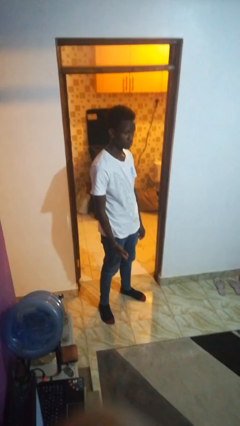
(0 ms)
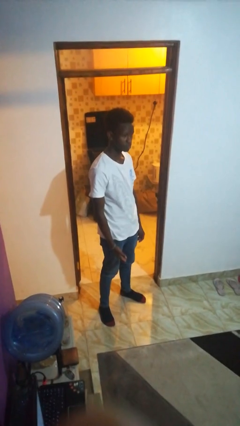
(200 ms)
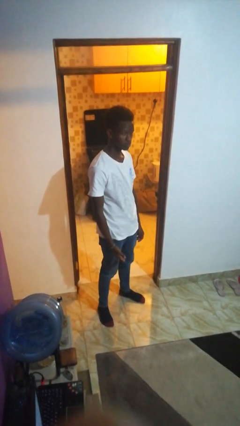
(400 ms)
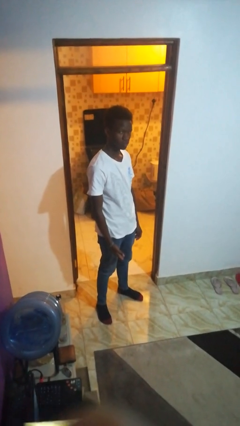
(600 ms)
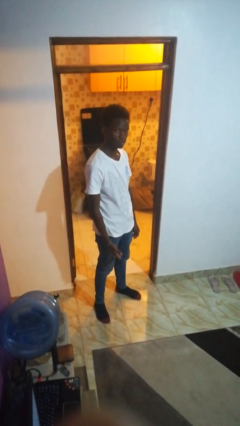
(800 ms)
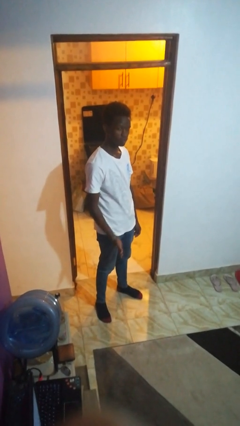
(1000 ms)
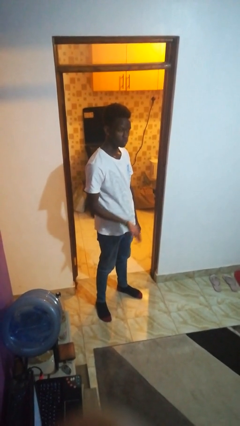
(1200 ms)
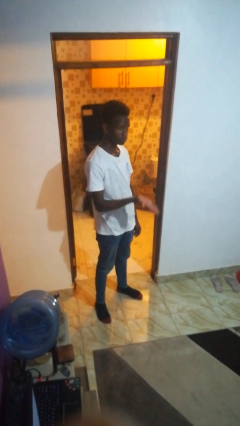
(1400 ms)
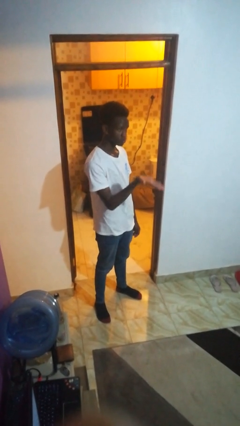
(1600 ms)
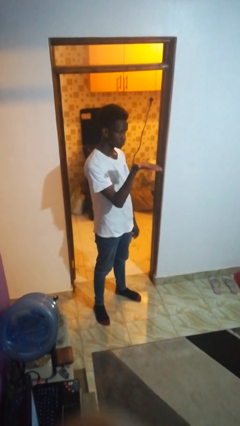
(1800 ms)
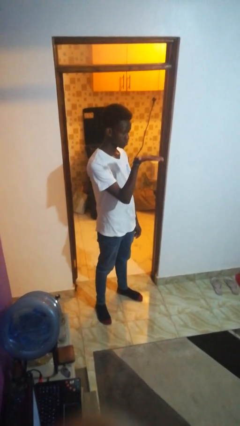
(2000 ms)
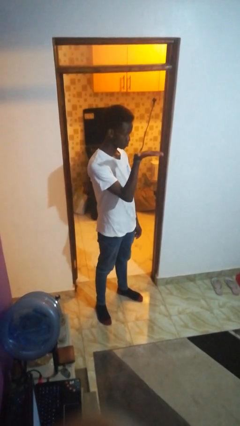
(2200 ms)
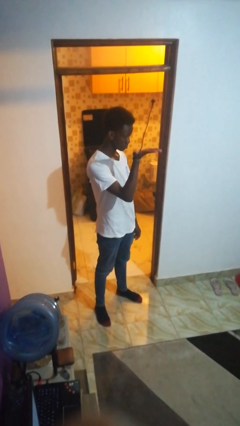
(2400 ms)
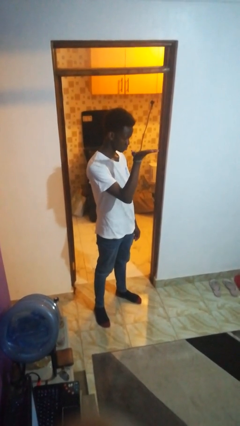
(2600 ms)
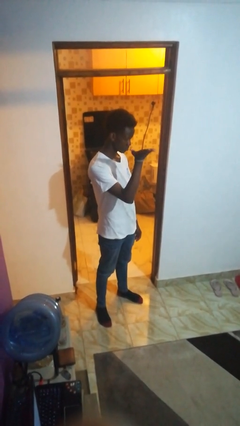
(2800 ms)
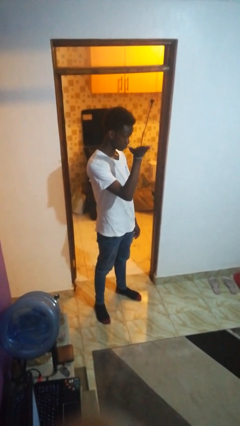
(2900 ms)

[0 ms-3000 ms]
person gestures swipe up

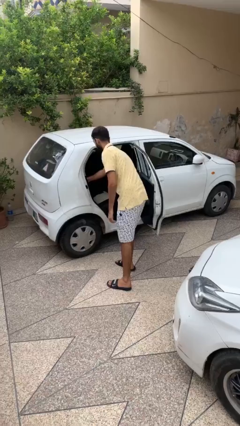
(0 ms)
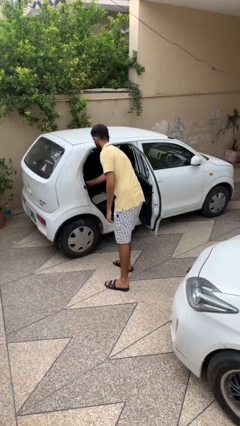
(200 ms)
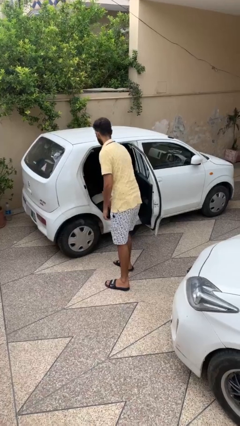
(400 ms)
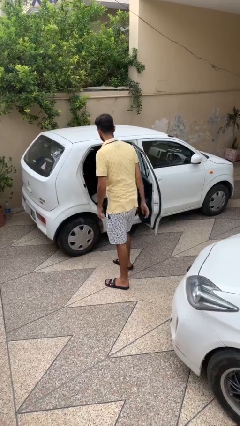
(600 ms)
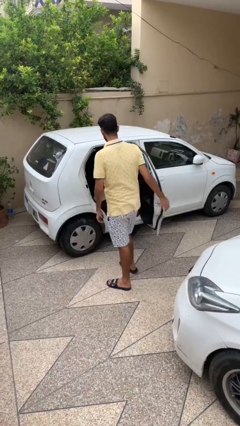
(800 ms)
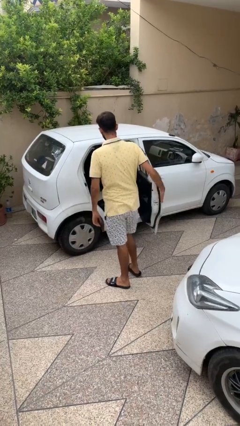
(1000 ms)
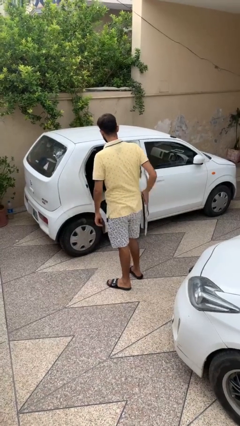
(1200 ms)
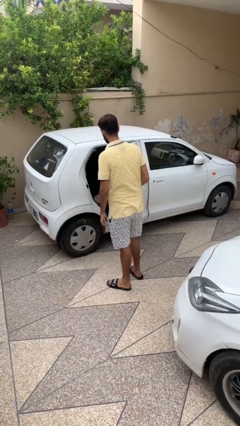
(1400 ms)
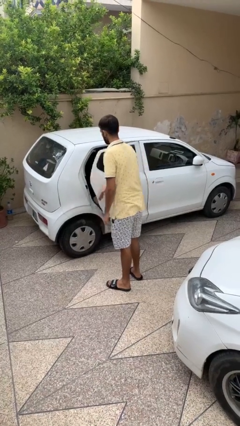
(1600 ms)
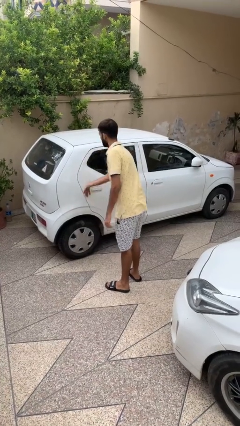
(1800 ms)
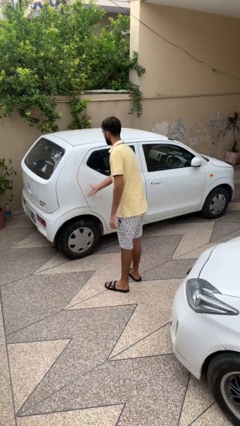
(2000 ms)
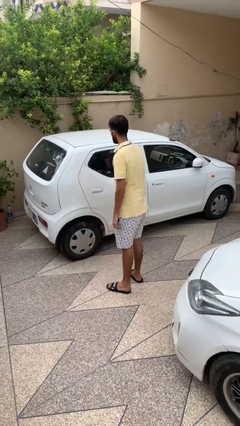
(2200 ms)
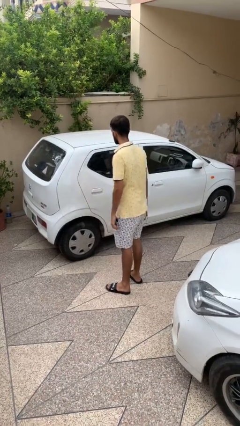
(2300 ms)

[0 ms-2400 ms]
person closes car door

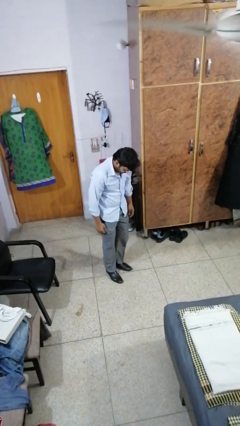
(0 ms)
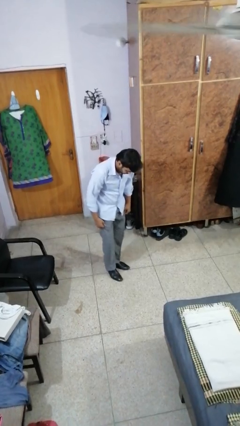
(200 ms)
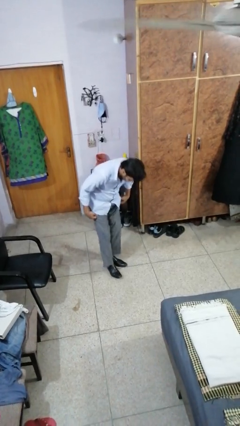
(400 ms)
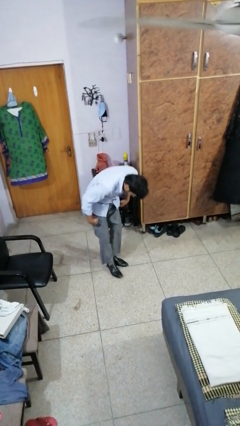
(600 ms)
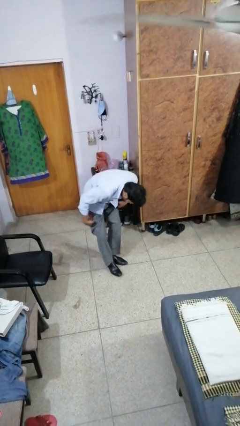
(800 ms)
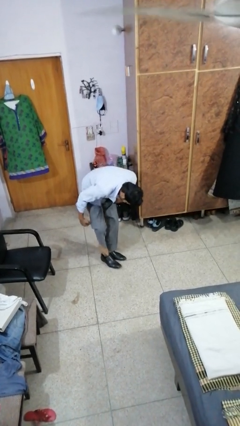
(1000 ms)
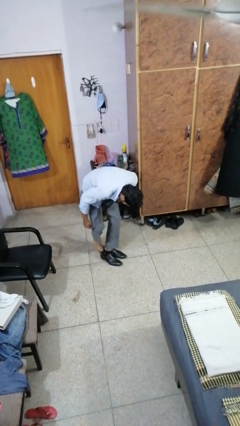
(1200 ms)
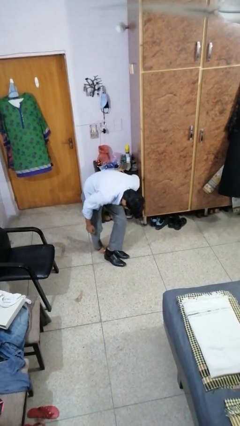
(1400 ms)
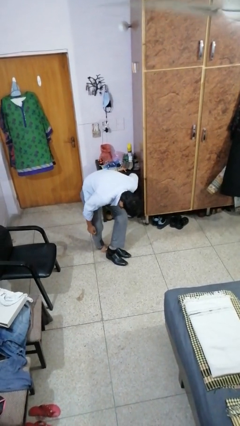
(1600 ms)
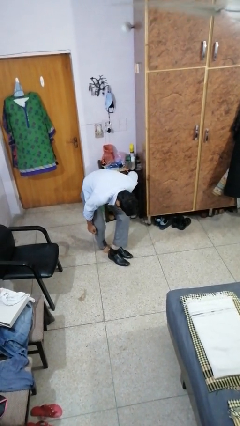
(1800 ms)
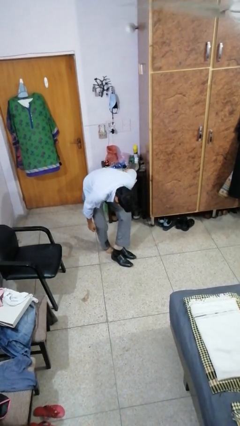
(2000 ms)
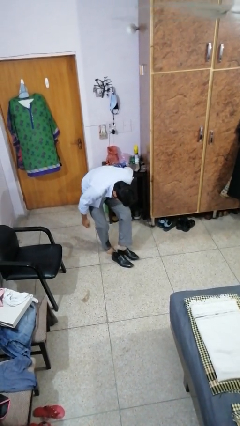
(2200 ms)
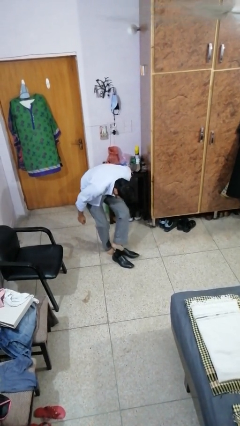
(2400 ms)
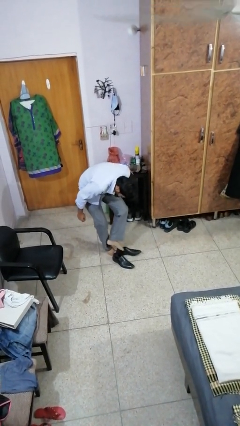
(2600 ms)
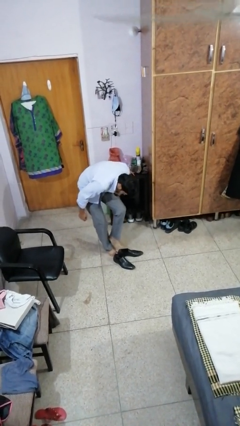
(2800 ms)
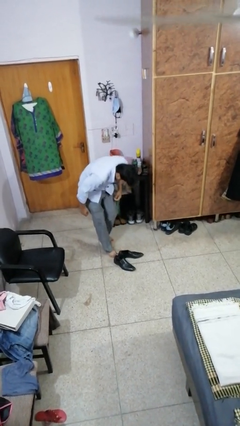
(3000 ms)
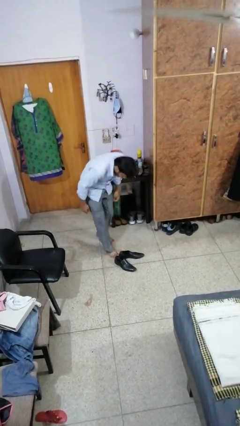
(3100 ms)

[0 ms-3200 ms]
person takes off shoes

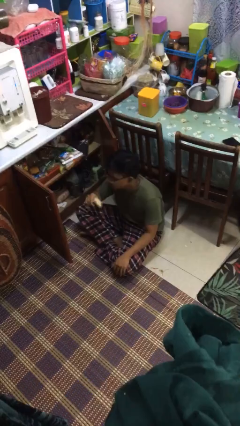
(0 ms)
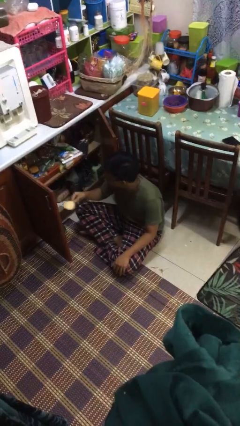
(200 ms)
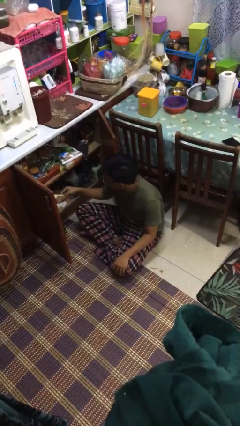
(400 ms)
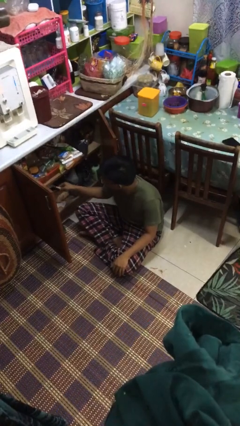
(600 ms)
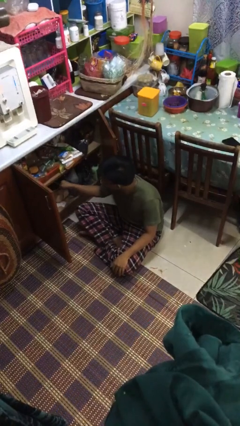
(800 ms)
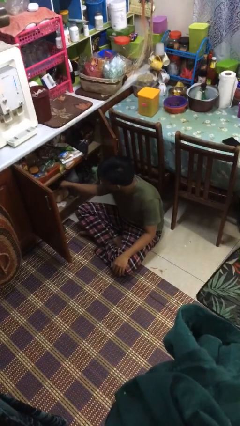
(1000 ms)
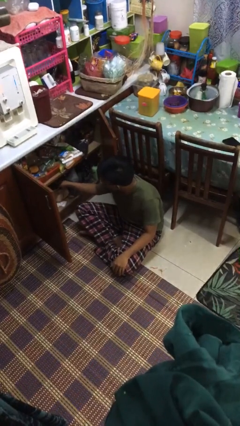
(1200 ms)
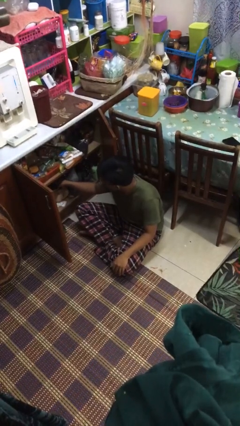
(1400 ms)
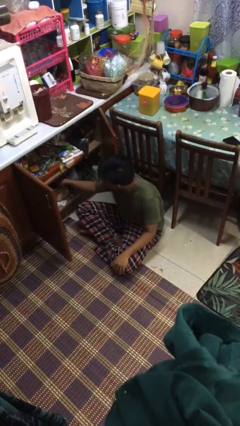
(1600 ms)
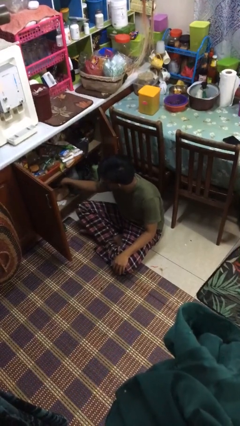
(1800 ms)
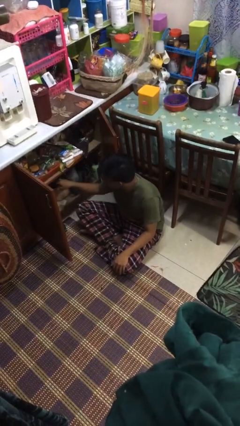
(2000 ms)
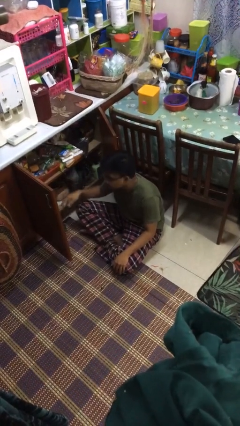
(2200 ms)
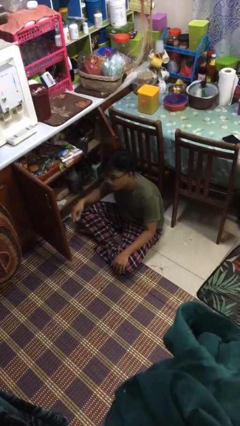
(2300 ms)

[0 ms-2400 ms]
person puts object into kitchen drawer

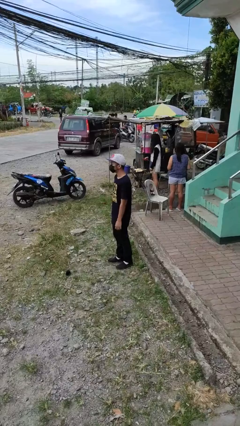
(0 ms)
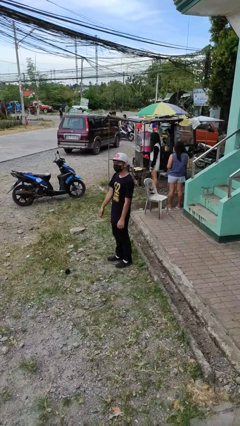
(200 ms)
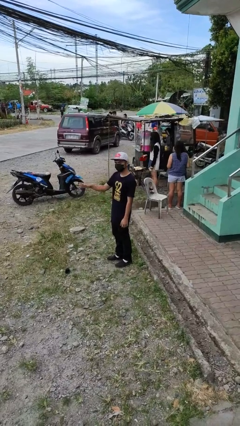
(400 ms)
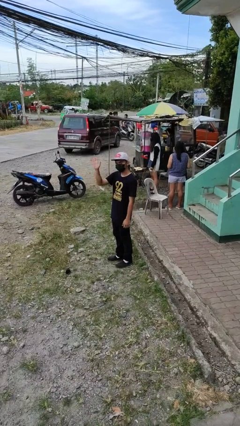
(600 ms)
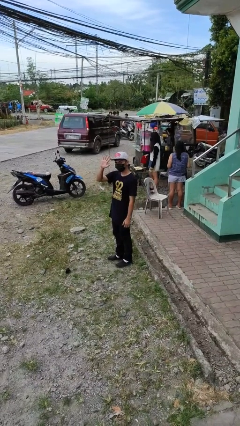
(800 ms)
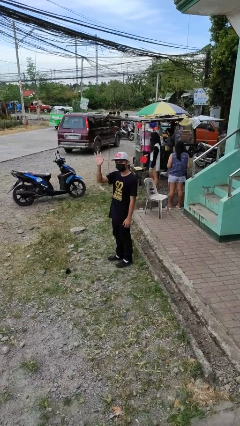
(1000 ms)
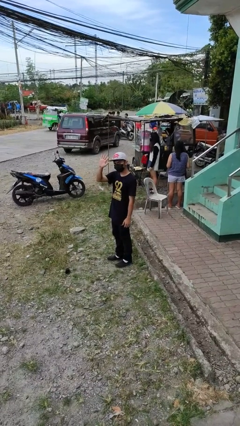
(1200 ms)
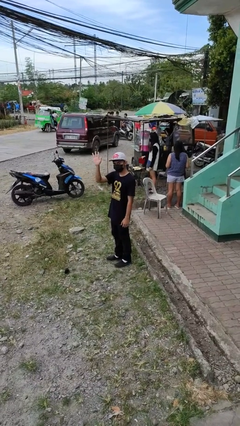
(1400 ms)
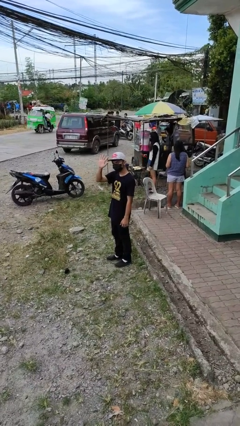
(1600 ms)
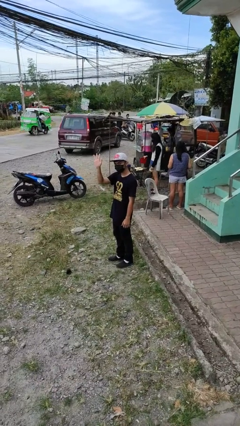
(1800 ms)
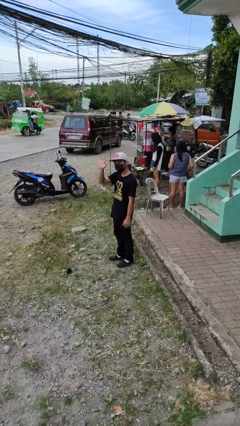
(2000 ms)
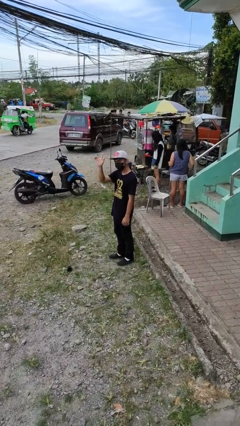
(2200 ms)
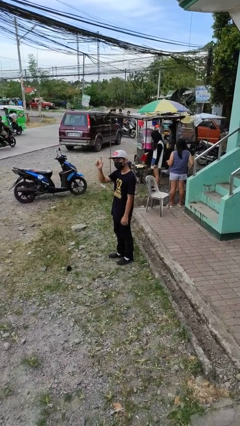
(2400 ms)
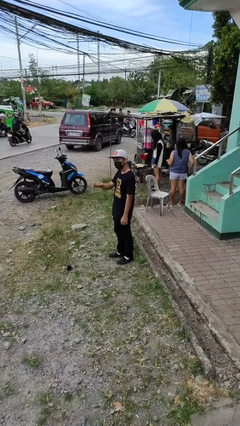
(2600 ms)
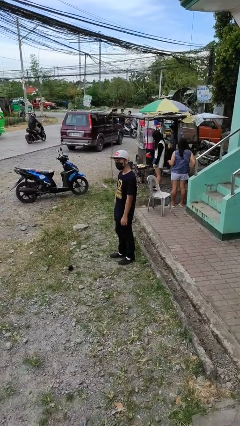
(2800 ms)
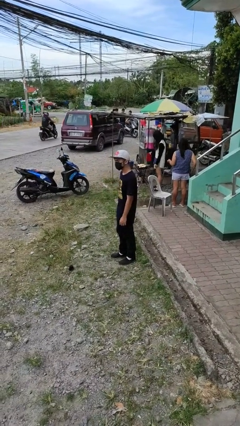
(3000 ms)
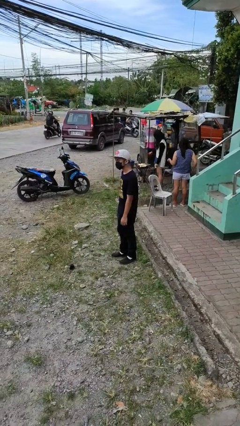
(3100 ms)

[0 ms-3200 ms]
person waves at person

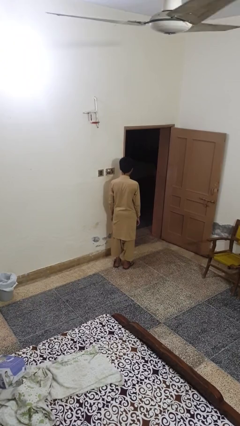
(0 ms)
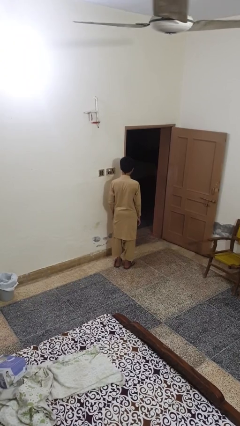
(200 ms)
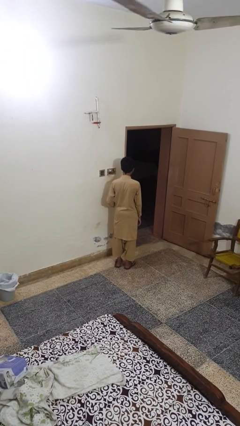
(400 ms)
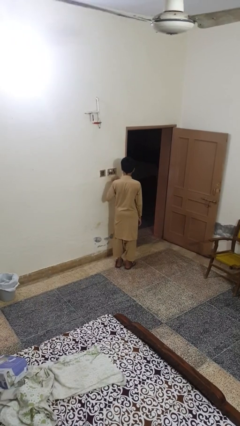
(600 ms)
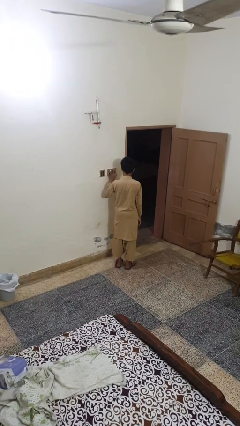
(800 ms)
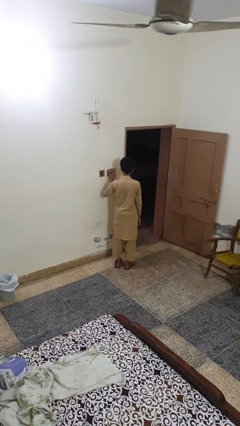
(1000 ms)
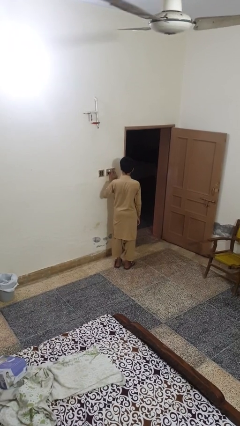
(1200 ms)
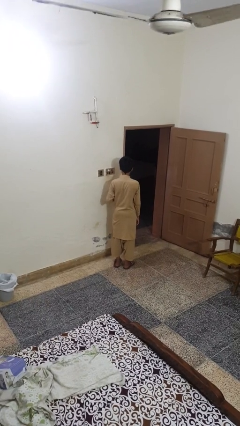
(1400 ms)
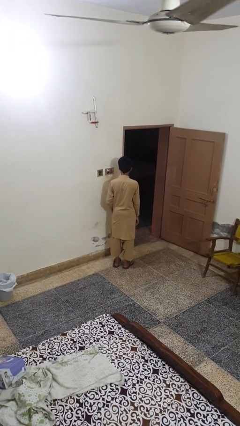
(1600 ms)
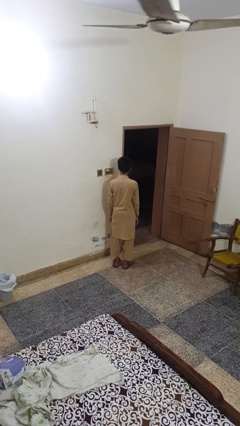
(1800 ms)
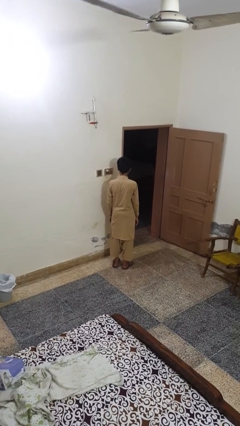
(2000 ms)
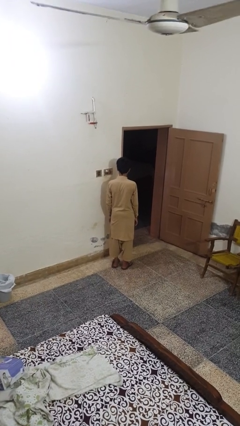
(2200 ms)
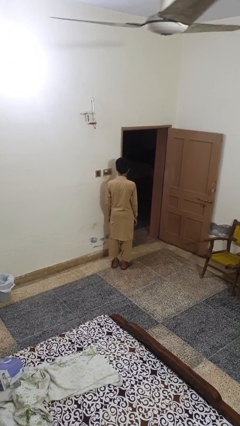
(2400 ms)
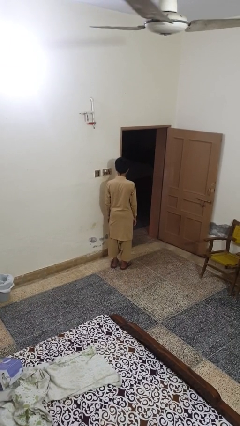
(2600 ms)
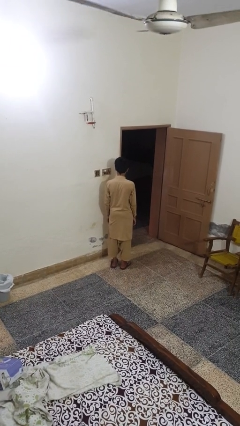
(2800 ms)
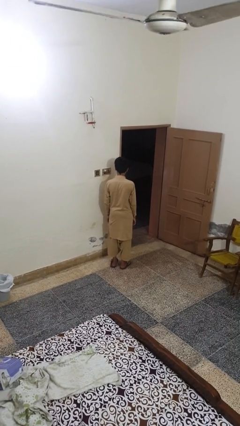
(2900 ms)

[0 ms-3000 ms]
person turns off fan

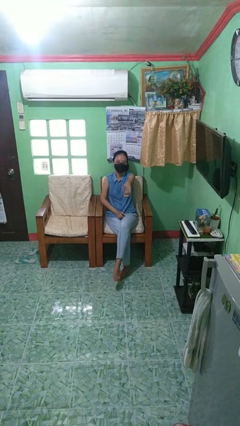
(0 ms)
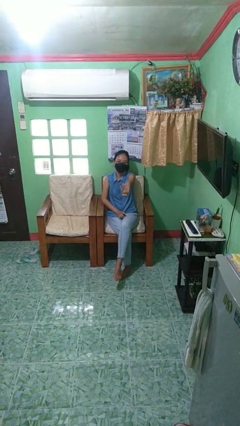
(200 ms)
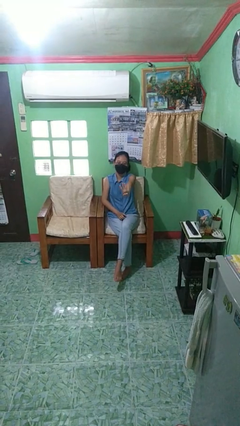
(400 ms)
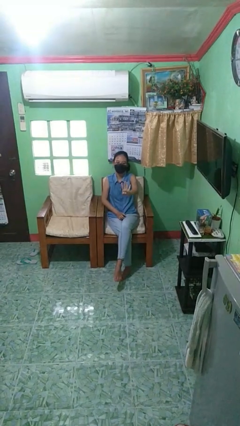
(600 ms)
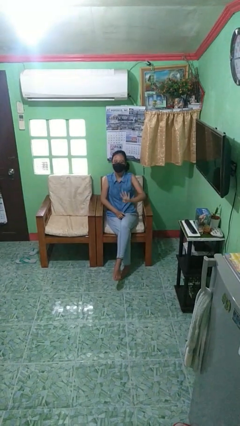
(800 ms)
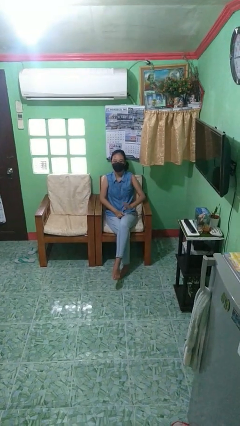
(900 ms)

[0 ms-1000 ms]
person gestures number four
